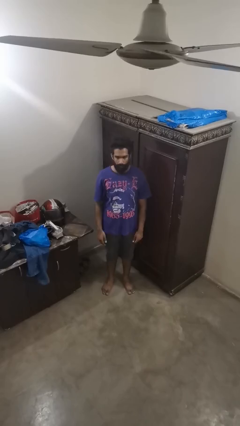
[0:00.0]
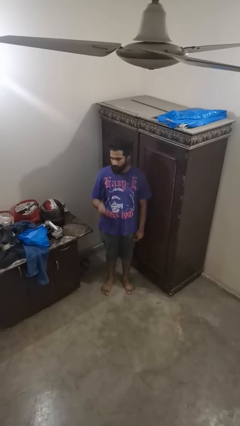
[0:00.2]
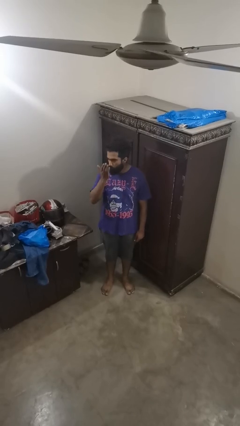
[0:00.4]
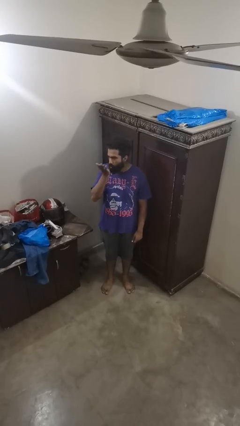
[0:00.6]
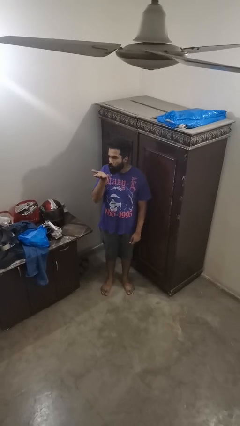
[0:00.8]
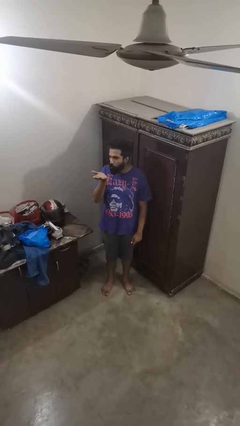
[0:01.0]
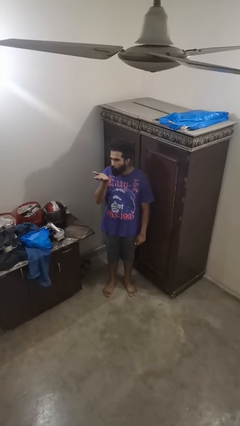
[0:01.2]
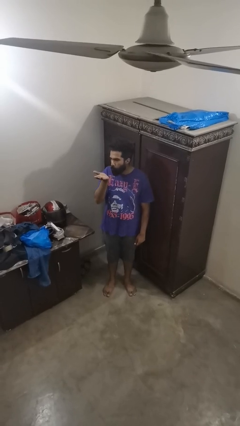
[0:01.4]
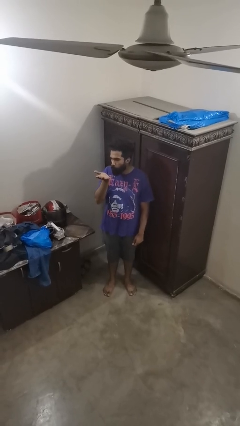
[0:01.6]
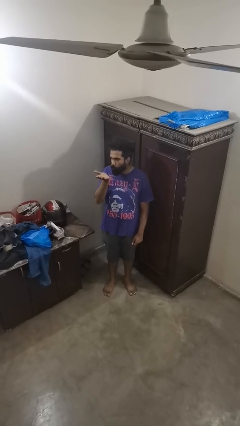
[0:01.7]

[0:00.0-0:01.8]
person gestures blow kiss

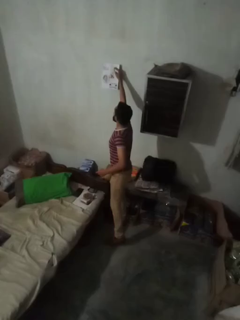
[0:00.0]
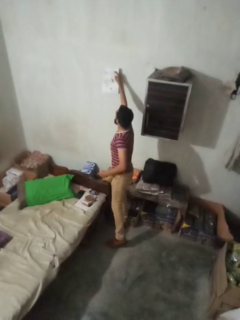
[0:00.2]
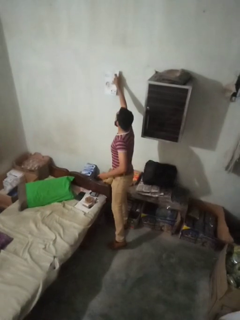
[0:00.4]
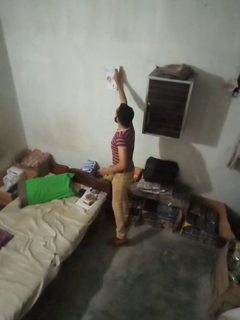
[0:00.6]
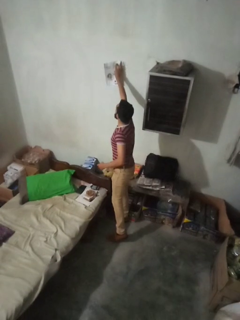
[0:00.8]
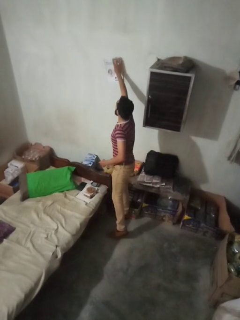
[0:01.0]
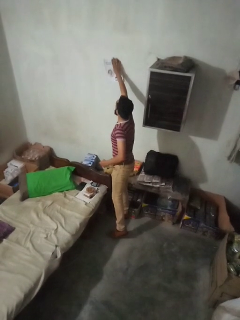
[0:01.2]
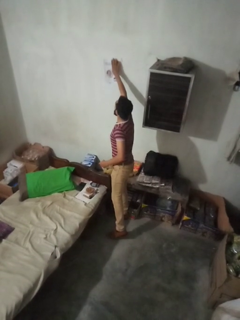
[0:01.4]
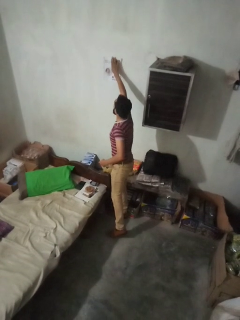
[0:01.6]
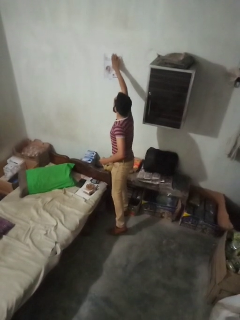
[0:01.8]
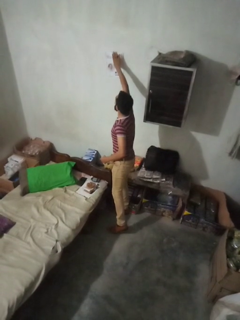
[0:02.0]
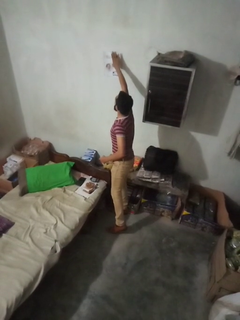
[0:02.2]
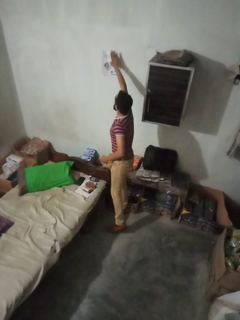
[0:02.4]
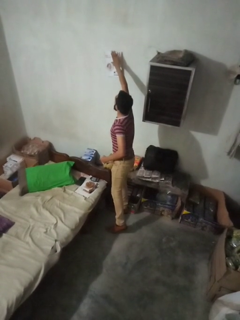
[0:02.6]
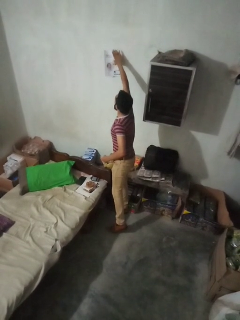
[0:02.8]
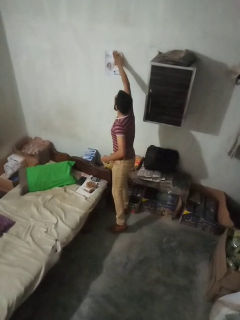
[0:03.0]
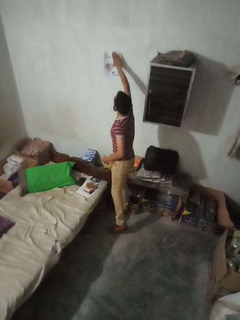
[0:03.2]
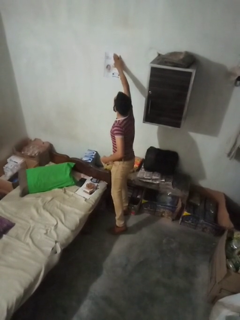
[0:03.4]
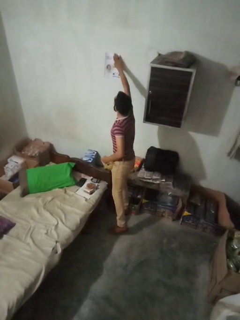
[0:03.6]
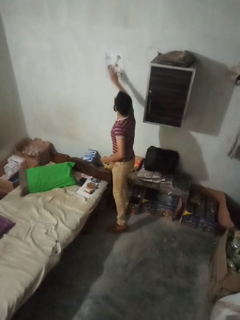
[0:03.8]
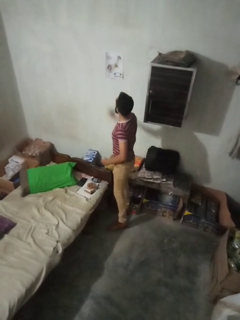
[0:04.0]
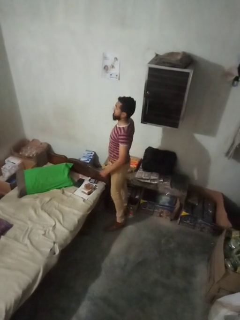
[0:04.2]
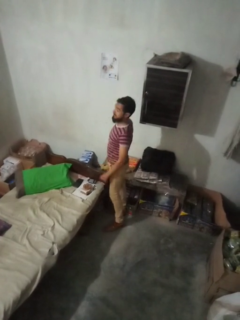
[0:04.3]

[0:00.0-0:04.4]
person puts up picture frame

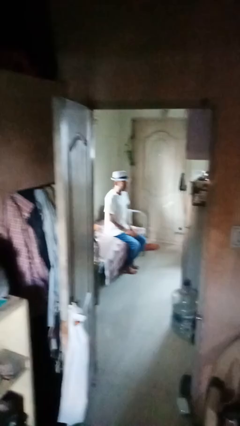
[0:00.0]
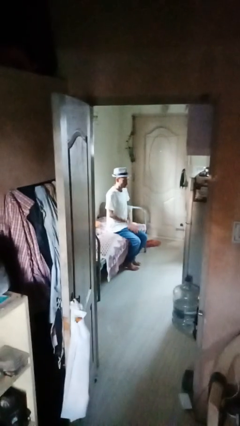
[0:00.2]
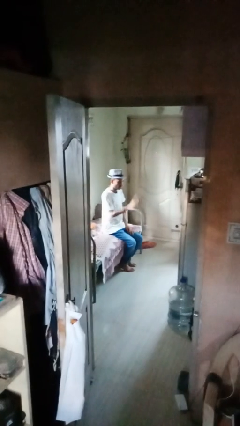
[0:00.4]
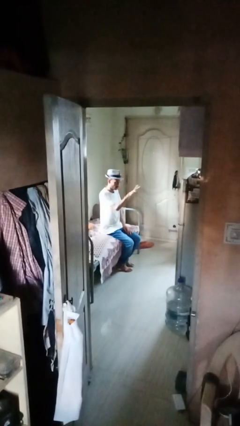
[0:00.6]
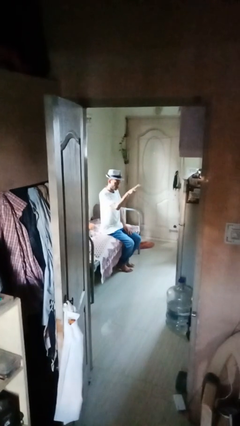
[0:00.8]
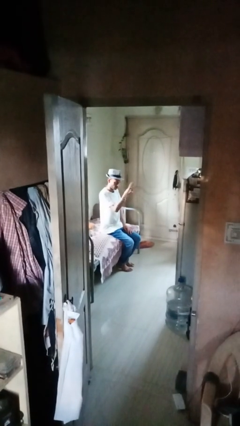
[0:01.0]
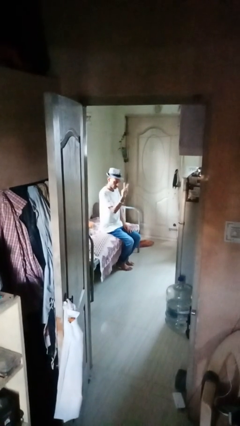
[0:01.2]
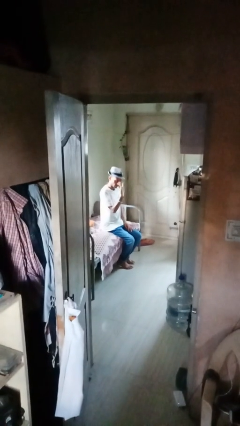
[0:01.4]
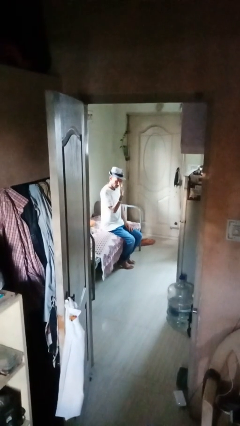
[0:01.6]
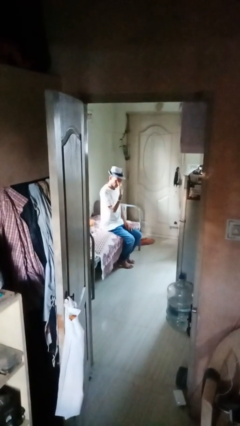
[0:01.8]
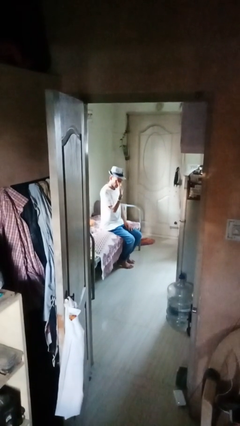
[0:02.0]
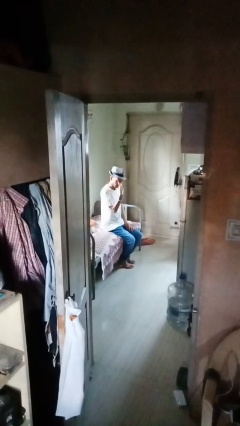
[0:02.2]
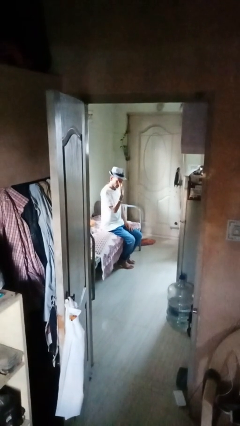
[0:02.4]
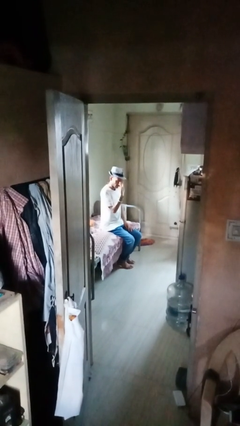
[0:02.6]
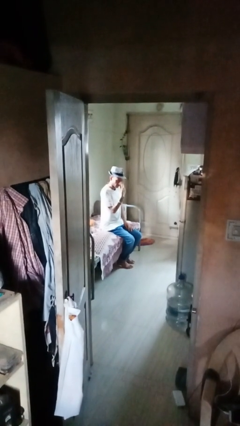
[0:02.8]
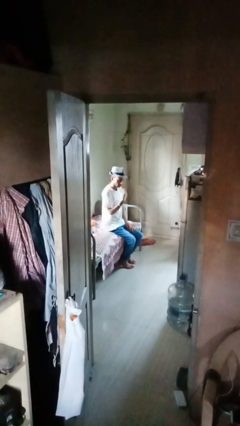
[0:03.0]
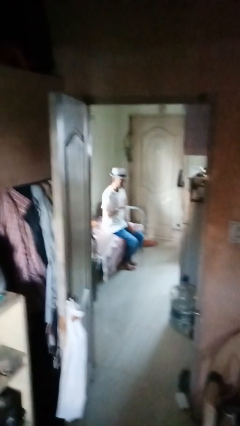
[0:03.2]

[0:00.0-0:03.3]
person gestures watch closely

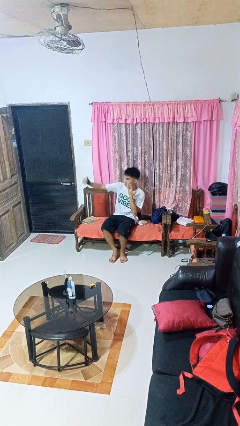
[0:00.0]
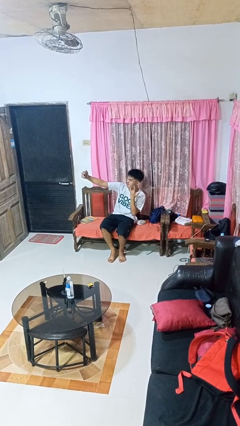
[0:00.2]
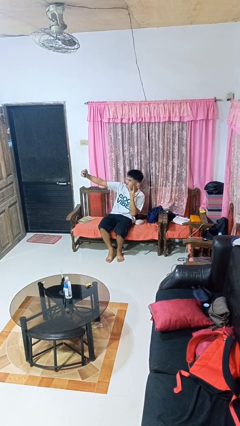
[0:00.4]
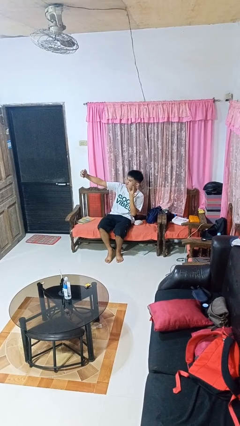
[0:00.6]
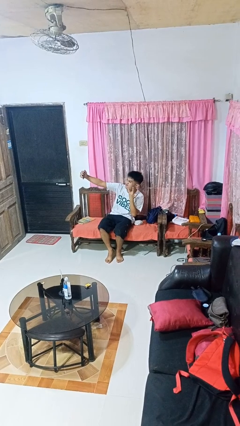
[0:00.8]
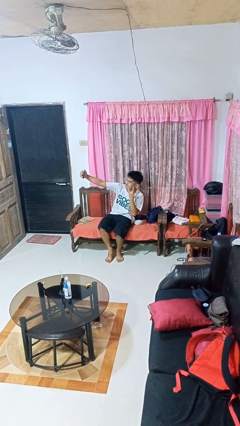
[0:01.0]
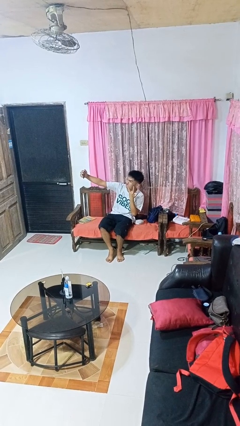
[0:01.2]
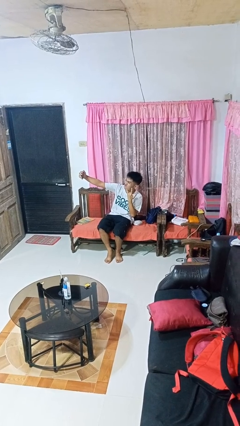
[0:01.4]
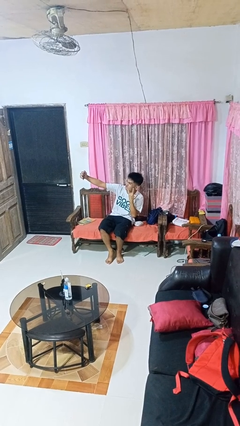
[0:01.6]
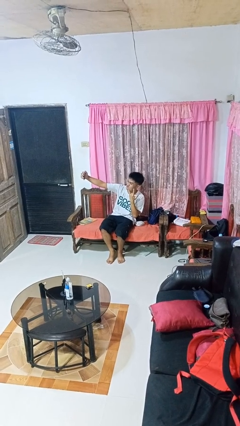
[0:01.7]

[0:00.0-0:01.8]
person takes selfie

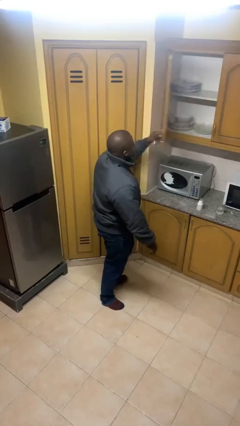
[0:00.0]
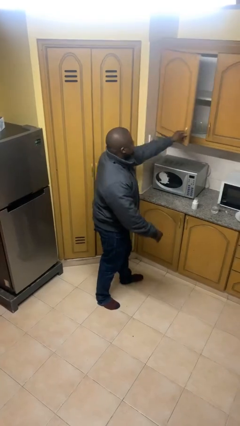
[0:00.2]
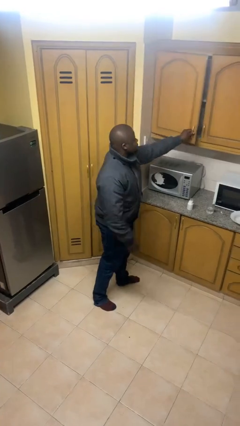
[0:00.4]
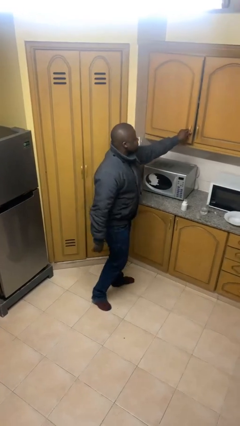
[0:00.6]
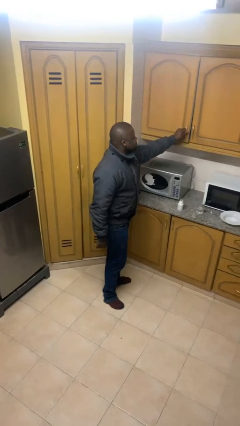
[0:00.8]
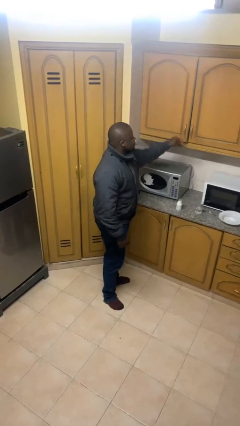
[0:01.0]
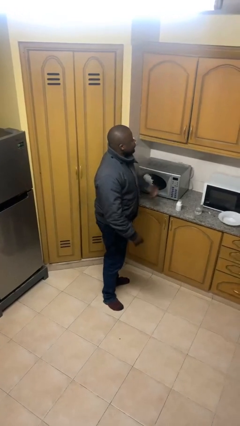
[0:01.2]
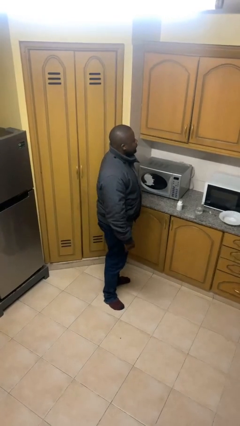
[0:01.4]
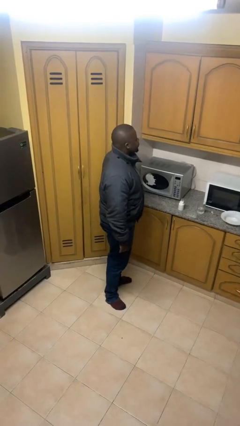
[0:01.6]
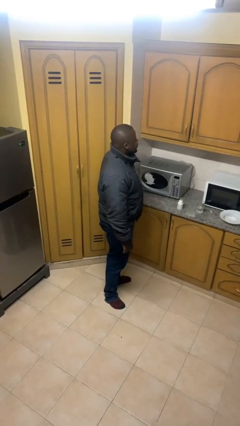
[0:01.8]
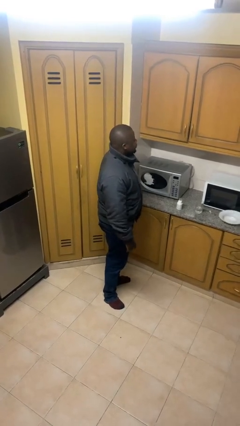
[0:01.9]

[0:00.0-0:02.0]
person closes cabinet

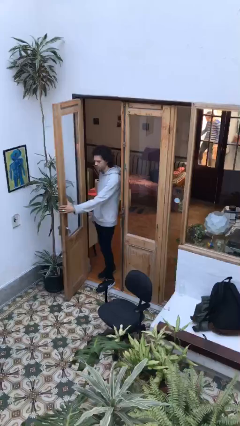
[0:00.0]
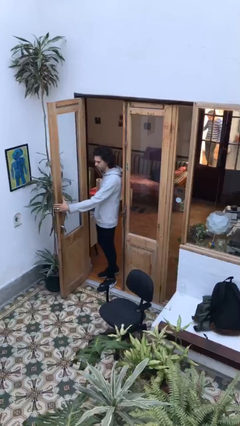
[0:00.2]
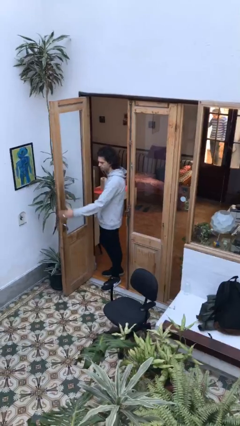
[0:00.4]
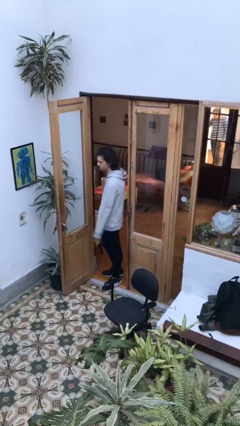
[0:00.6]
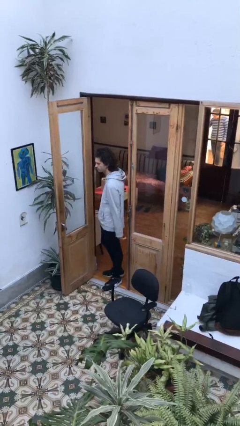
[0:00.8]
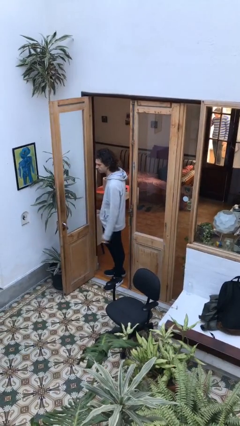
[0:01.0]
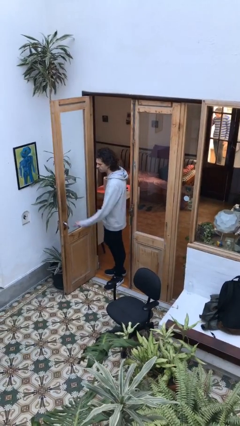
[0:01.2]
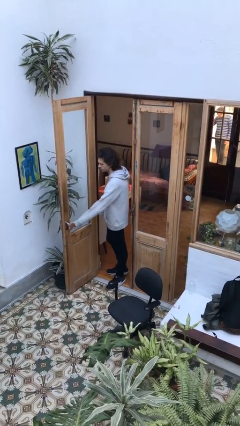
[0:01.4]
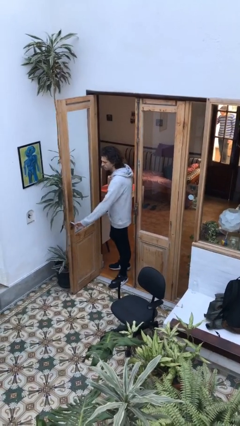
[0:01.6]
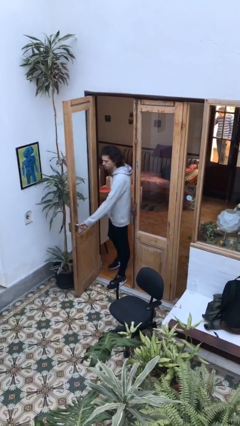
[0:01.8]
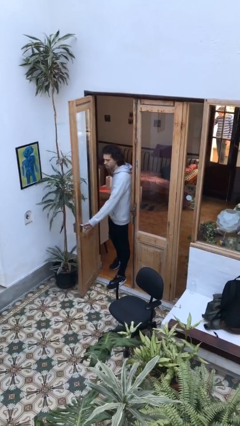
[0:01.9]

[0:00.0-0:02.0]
person opens facility door

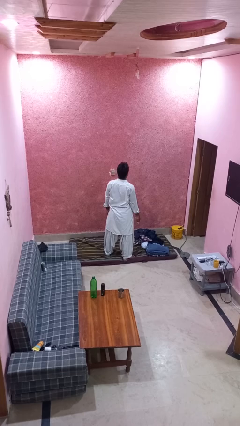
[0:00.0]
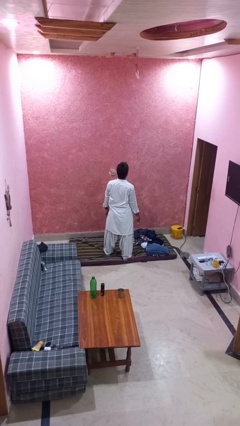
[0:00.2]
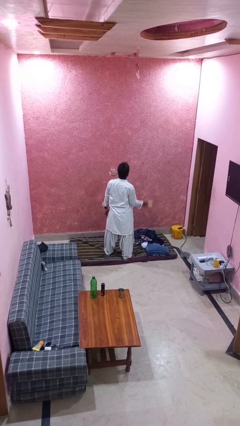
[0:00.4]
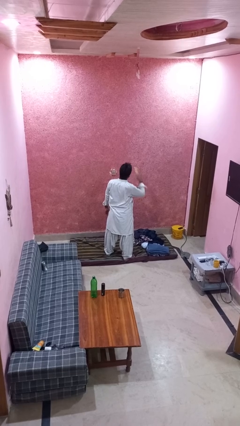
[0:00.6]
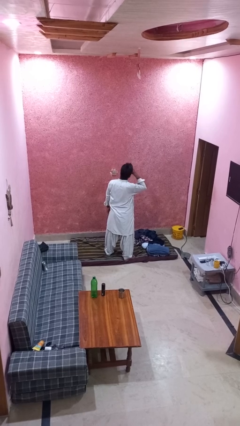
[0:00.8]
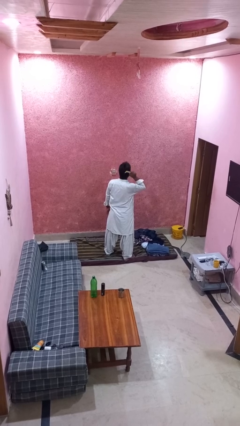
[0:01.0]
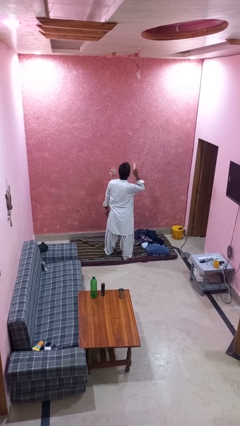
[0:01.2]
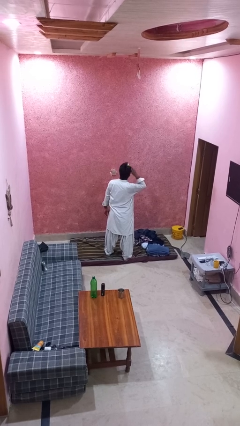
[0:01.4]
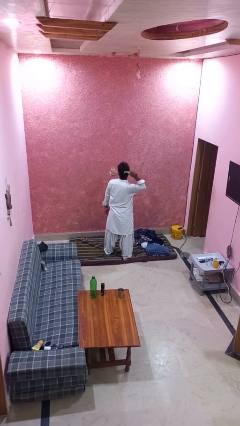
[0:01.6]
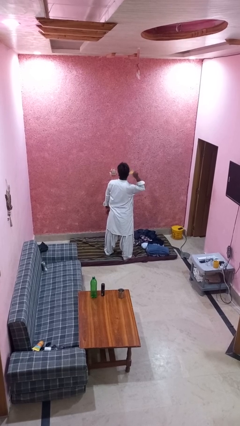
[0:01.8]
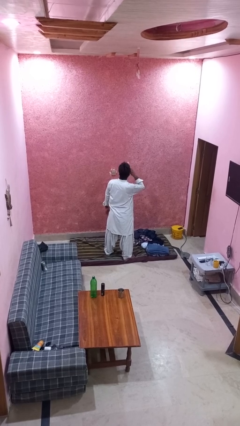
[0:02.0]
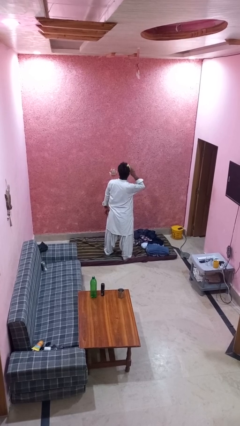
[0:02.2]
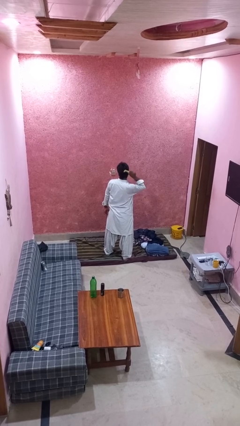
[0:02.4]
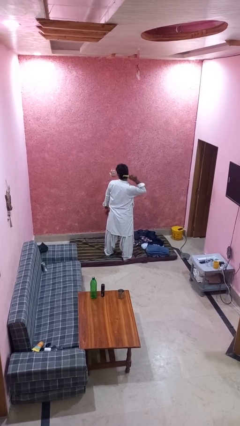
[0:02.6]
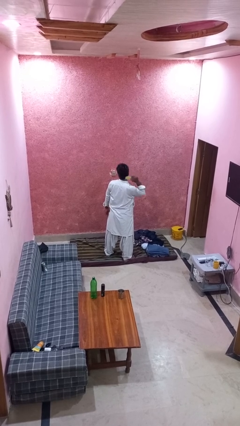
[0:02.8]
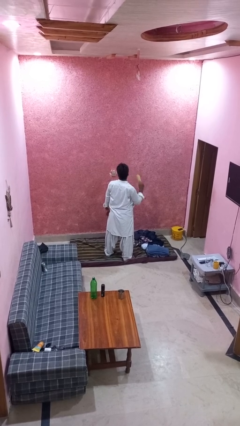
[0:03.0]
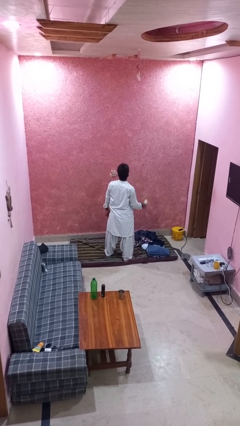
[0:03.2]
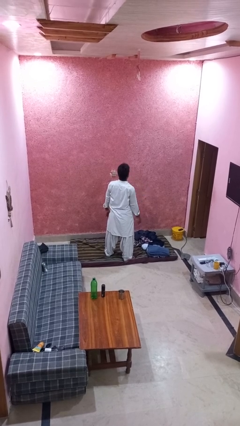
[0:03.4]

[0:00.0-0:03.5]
person brushes hair
